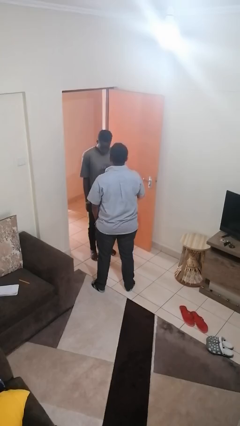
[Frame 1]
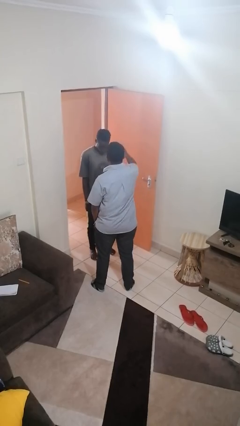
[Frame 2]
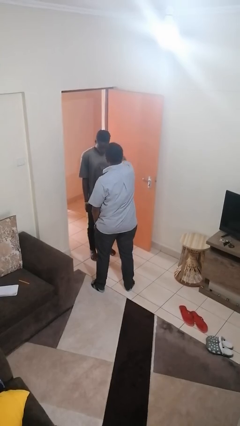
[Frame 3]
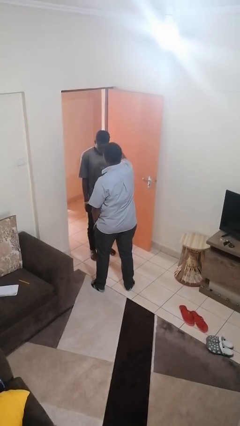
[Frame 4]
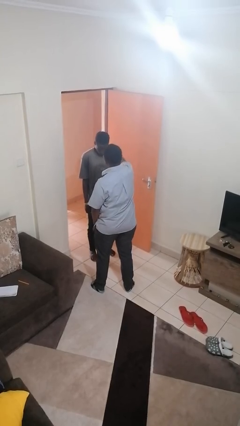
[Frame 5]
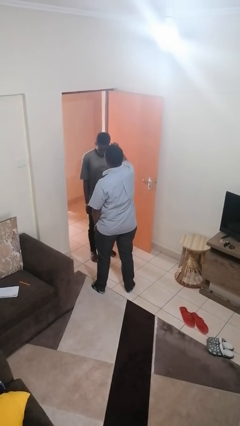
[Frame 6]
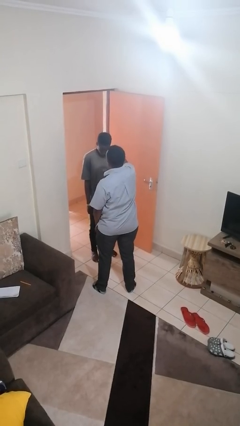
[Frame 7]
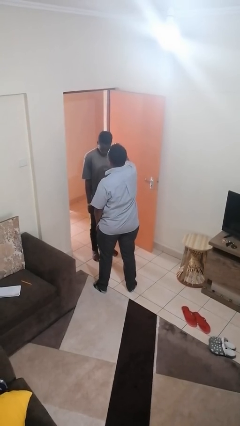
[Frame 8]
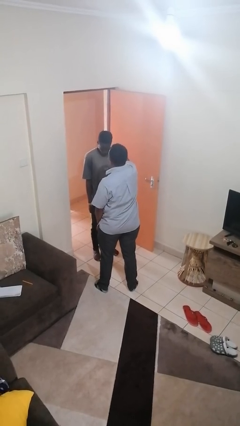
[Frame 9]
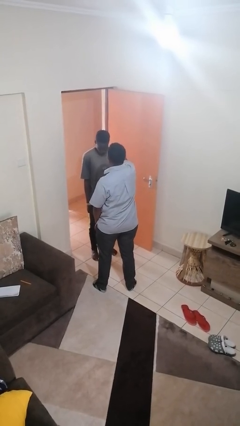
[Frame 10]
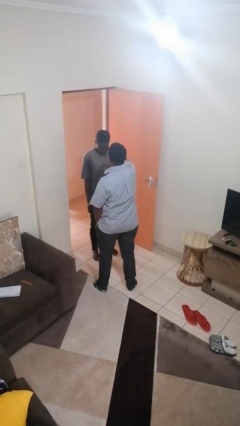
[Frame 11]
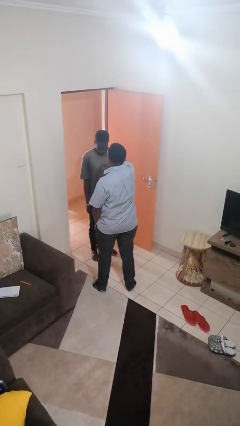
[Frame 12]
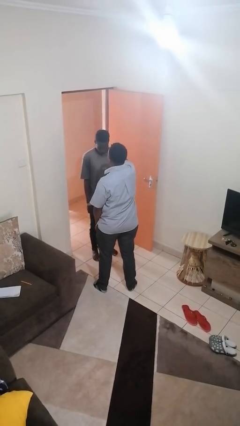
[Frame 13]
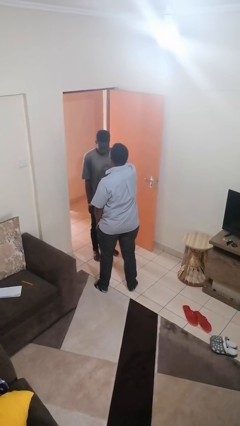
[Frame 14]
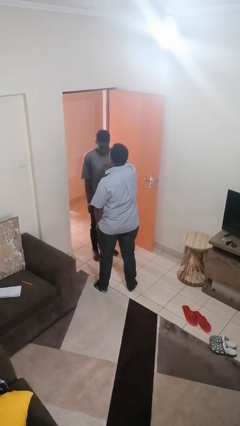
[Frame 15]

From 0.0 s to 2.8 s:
person pounds shoulders of person

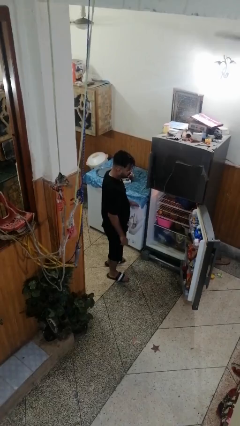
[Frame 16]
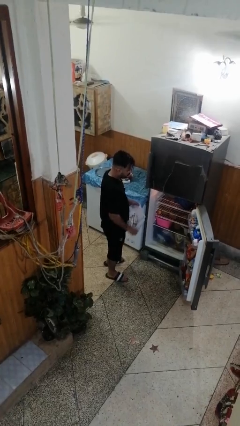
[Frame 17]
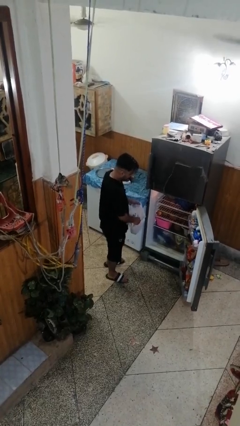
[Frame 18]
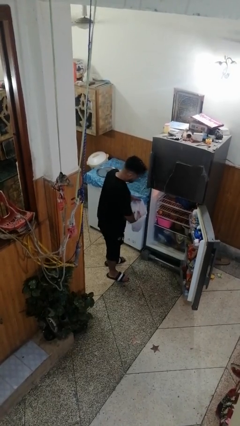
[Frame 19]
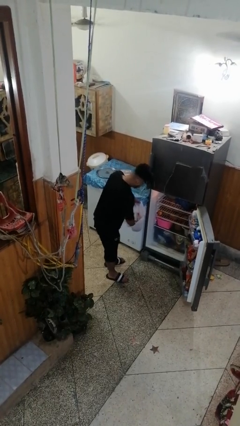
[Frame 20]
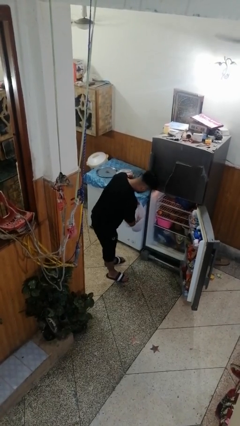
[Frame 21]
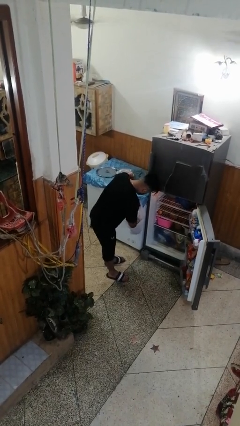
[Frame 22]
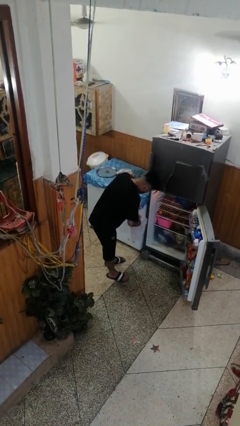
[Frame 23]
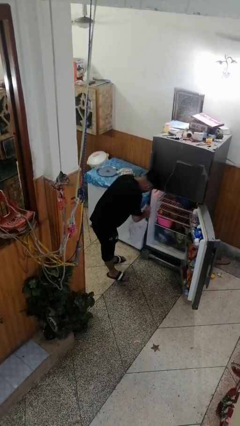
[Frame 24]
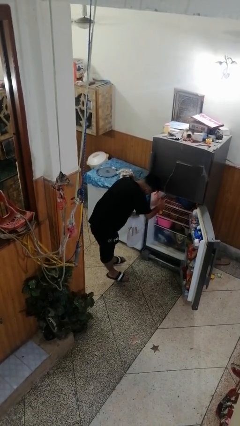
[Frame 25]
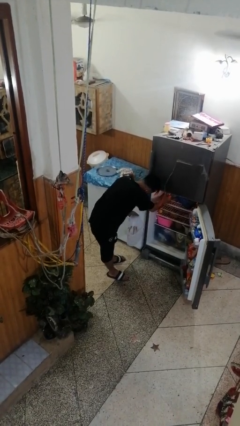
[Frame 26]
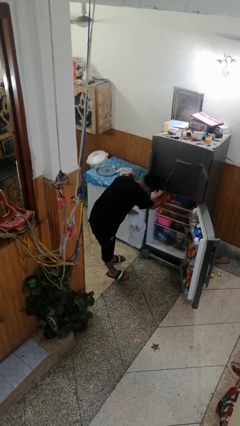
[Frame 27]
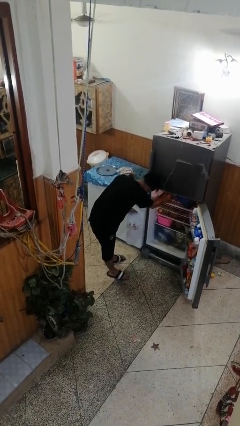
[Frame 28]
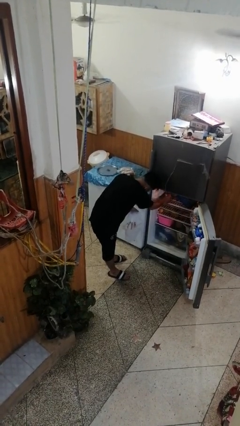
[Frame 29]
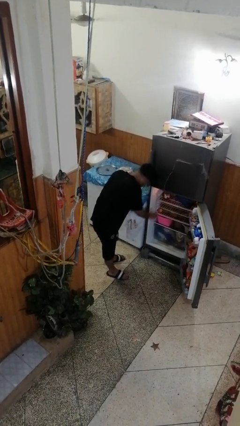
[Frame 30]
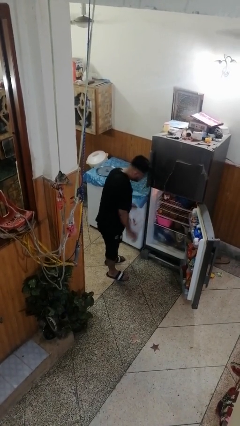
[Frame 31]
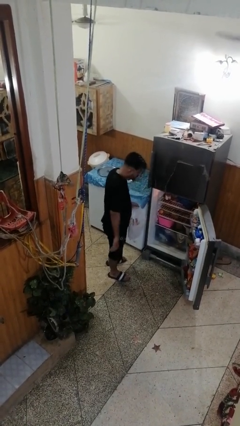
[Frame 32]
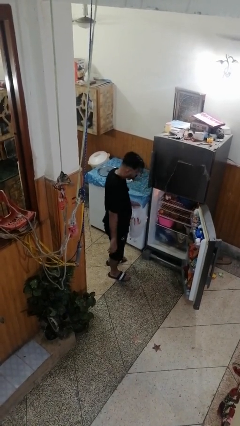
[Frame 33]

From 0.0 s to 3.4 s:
person loads groceries into refrigerator

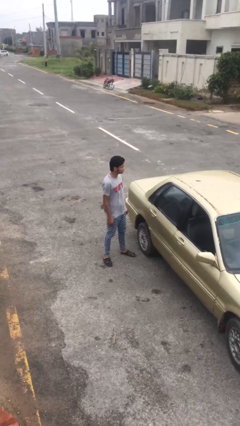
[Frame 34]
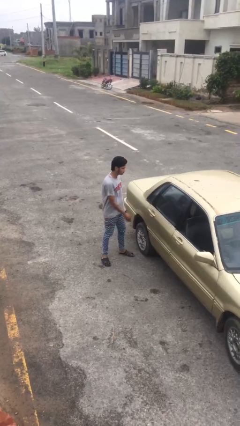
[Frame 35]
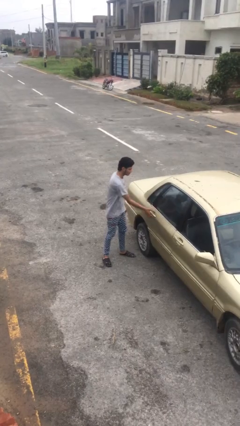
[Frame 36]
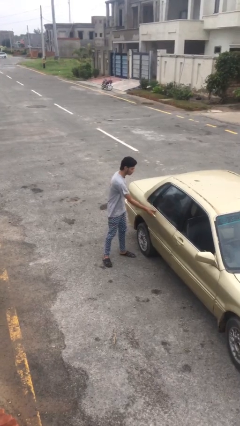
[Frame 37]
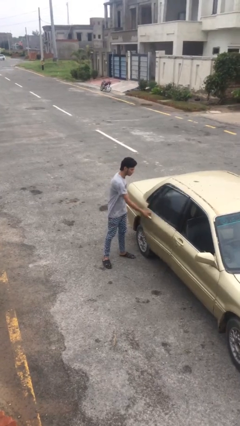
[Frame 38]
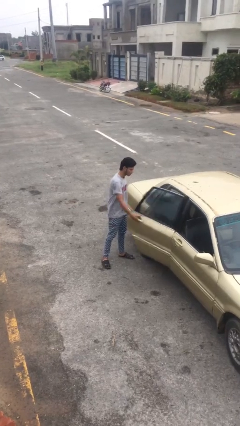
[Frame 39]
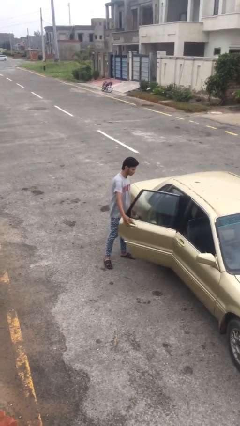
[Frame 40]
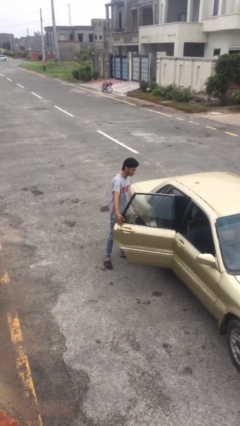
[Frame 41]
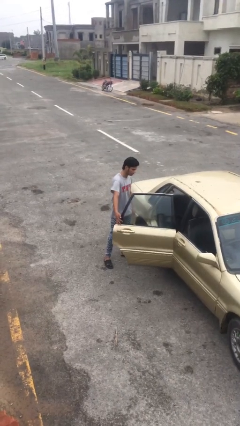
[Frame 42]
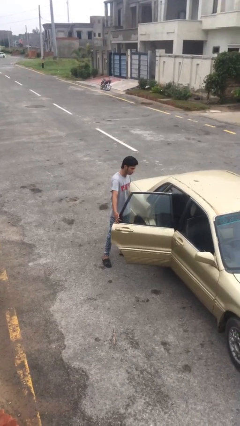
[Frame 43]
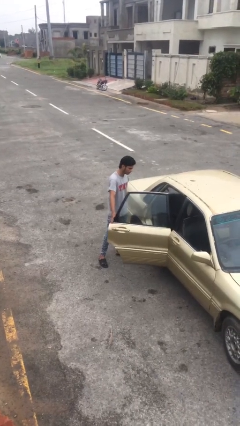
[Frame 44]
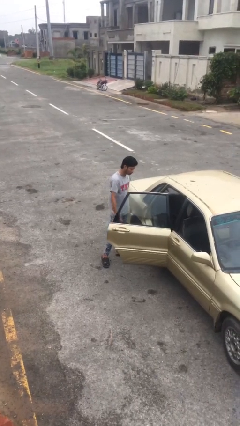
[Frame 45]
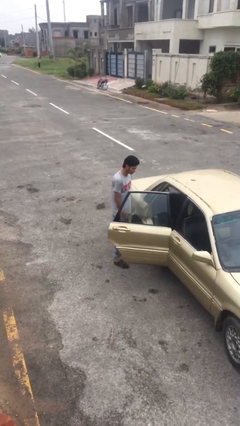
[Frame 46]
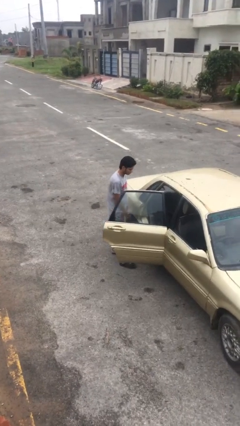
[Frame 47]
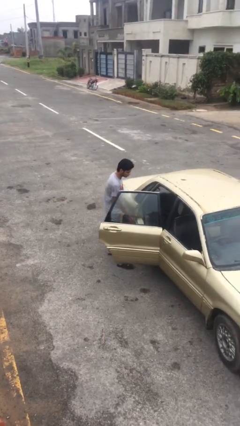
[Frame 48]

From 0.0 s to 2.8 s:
person opens car door

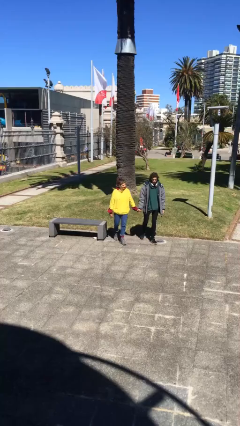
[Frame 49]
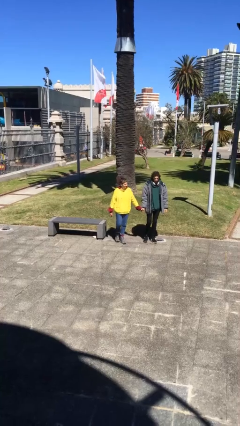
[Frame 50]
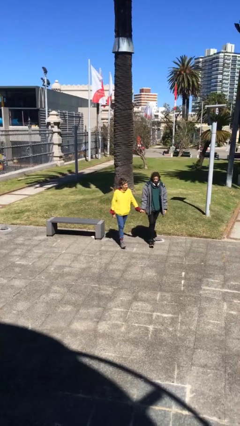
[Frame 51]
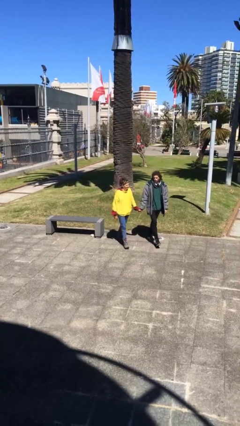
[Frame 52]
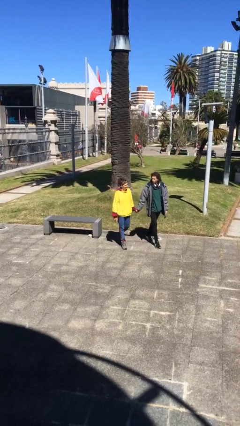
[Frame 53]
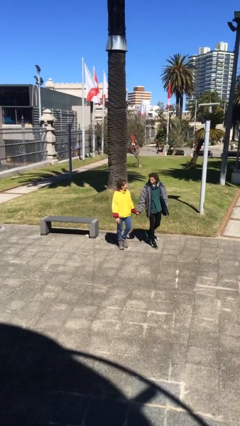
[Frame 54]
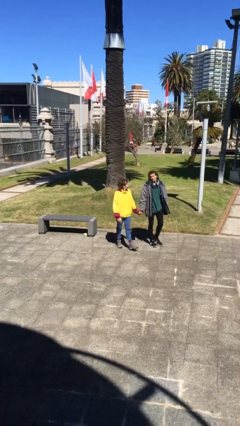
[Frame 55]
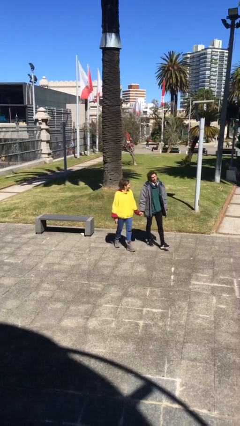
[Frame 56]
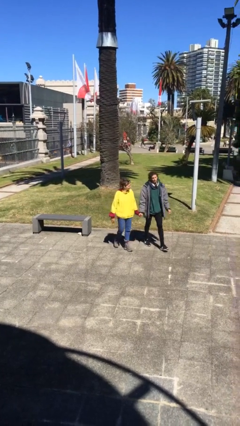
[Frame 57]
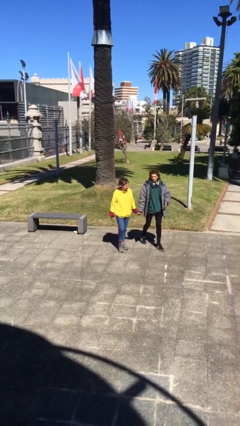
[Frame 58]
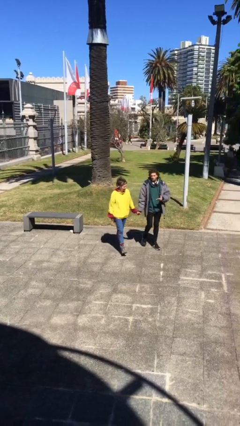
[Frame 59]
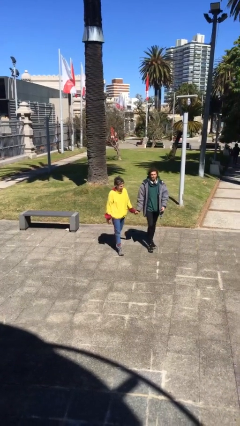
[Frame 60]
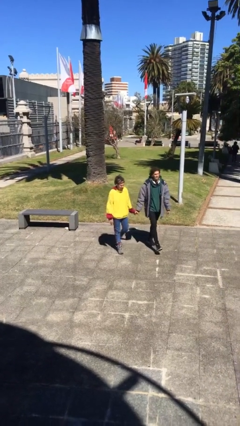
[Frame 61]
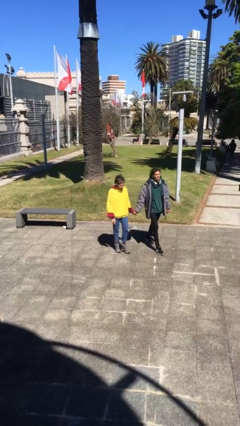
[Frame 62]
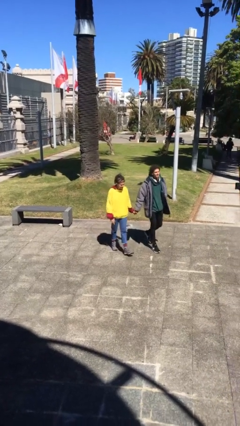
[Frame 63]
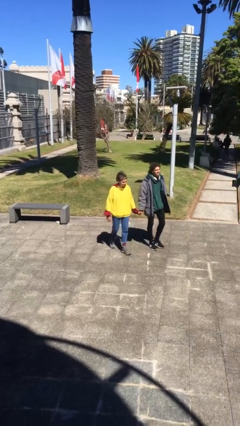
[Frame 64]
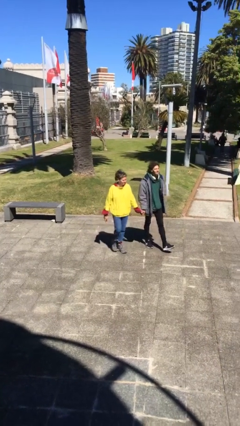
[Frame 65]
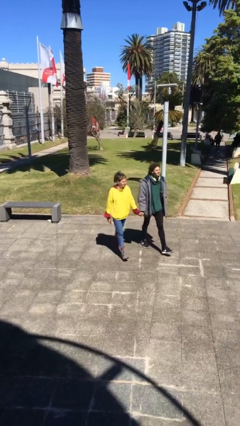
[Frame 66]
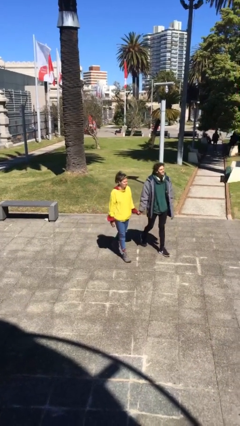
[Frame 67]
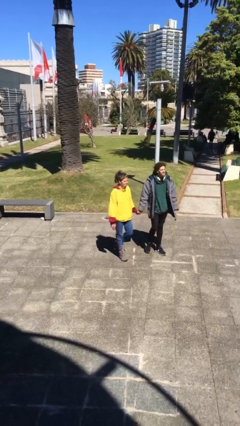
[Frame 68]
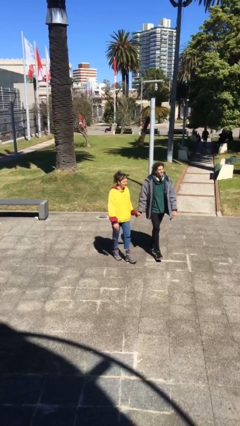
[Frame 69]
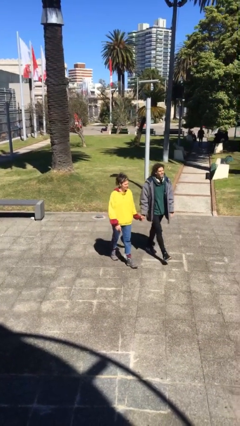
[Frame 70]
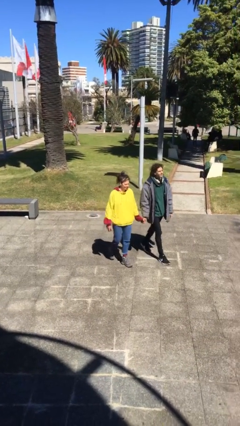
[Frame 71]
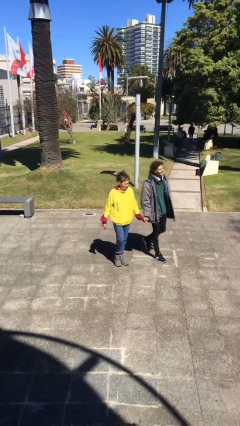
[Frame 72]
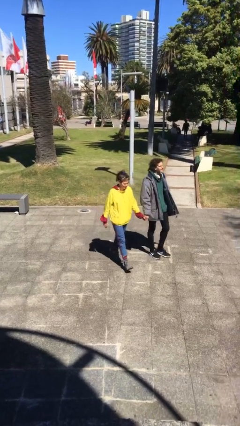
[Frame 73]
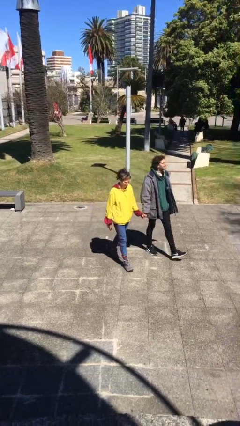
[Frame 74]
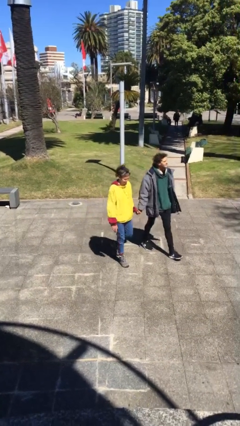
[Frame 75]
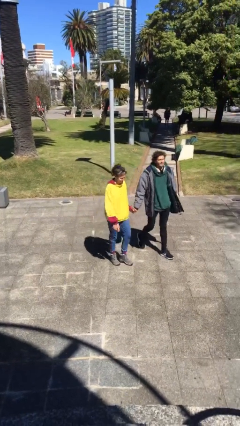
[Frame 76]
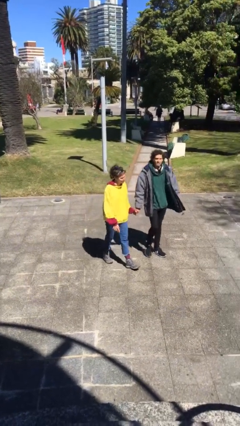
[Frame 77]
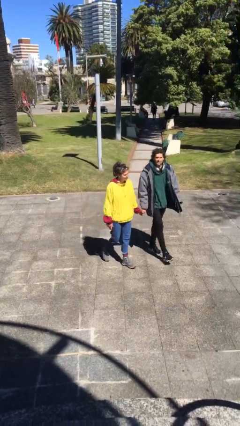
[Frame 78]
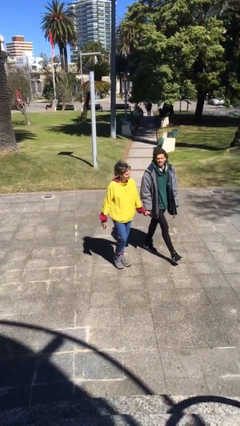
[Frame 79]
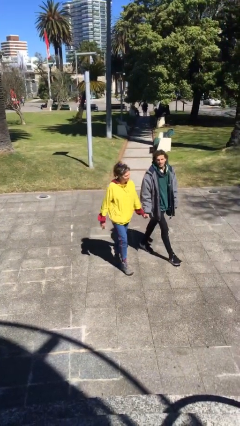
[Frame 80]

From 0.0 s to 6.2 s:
person holds hand

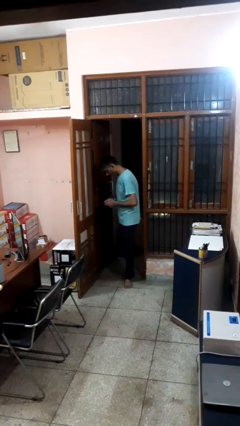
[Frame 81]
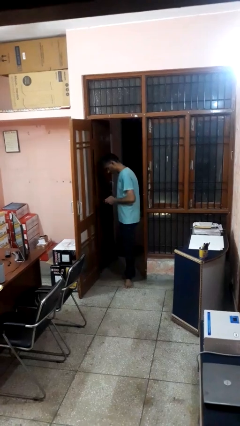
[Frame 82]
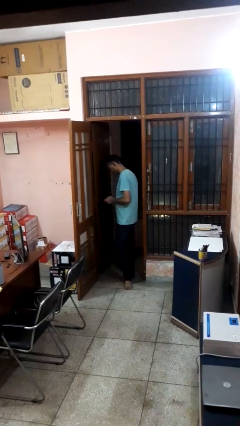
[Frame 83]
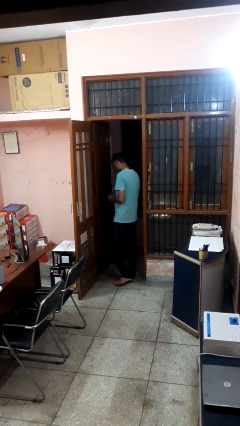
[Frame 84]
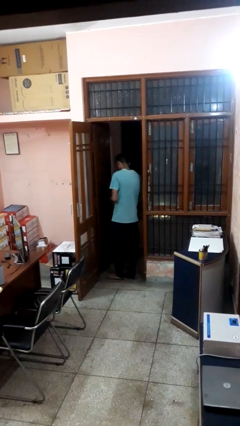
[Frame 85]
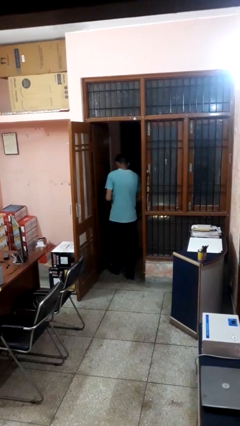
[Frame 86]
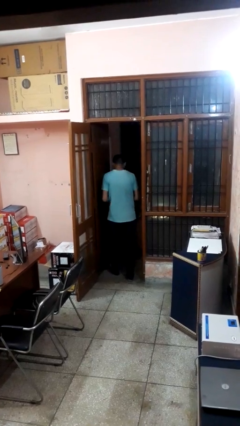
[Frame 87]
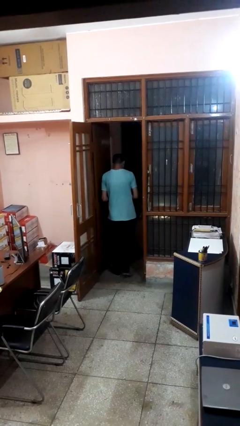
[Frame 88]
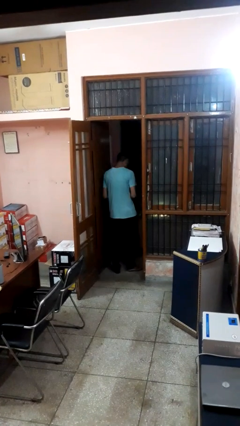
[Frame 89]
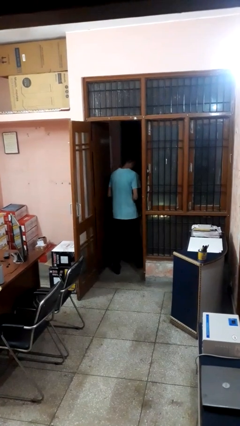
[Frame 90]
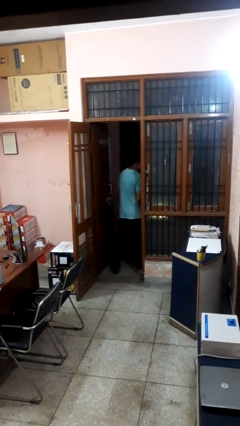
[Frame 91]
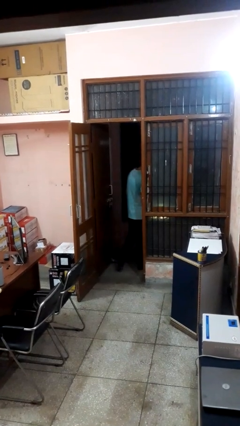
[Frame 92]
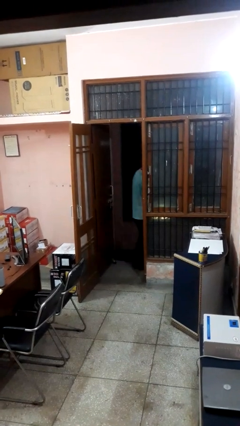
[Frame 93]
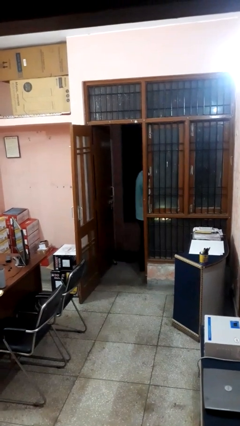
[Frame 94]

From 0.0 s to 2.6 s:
person exits scene through structure
